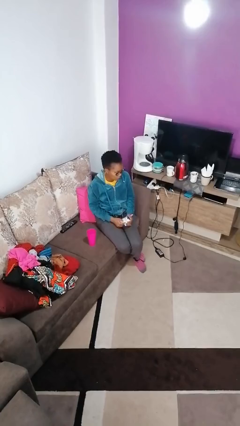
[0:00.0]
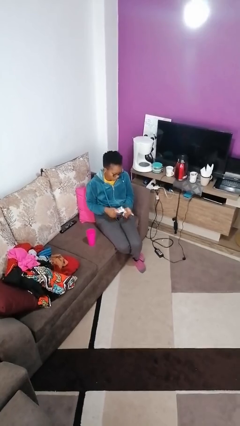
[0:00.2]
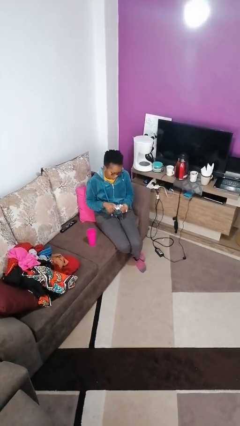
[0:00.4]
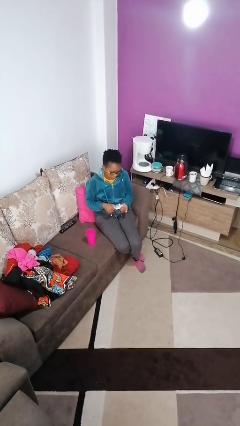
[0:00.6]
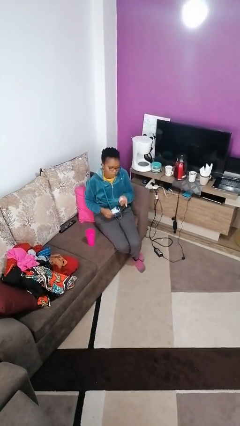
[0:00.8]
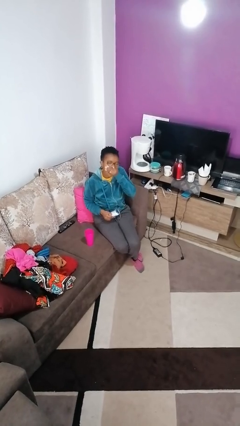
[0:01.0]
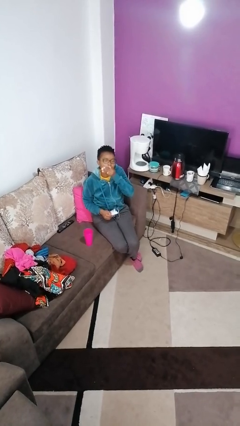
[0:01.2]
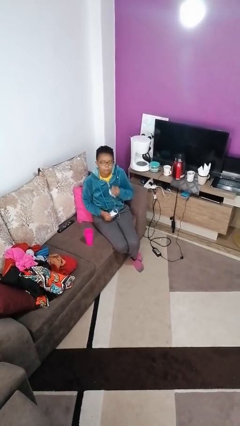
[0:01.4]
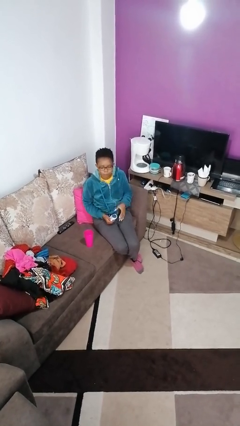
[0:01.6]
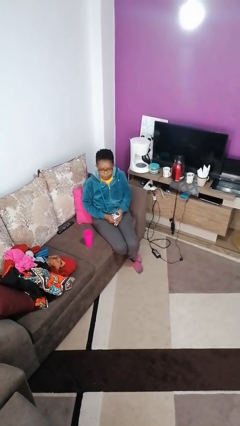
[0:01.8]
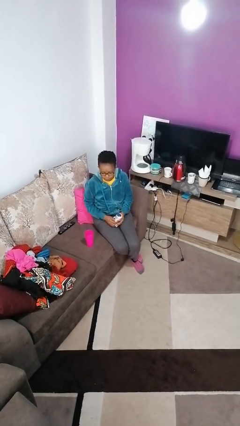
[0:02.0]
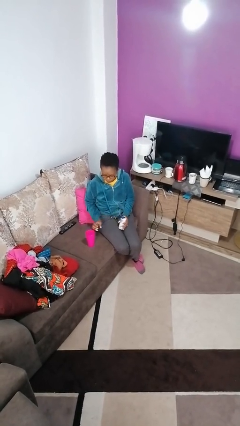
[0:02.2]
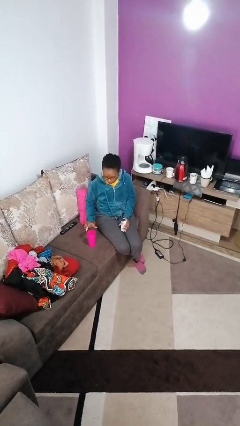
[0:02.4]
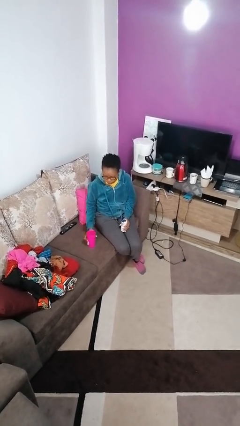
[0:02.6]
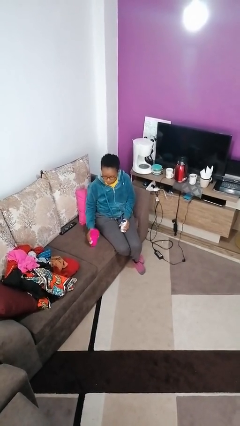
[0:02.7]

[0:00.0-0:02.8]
person takes medicine pills

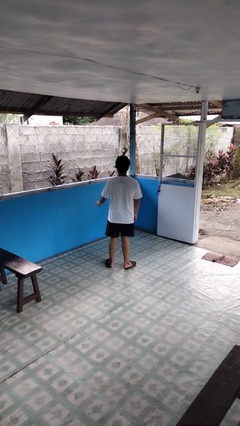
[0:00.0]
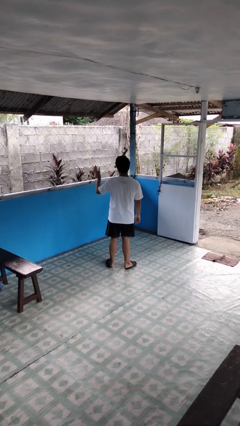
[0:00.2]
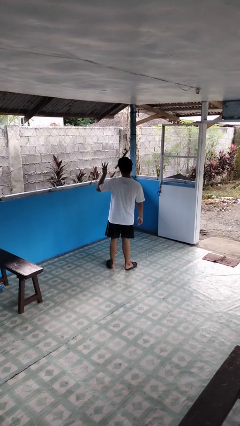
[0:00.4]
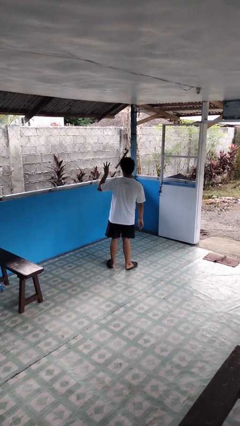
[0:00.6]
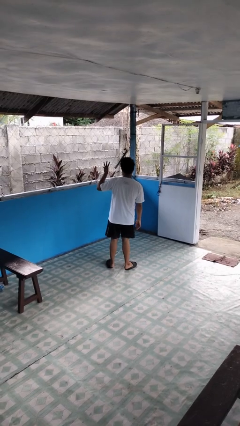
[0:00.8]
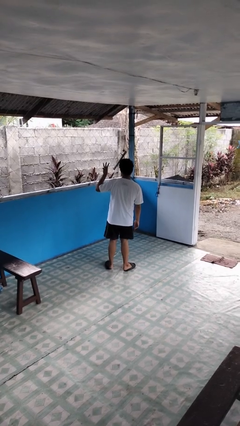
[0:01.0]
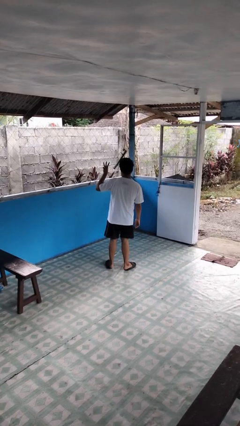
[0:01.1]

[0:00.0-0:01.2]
person gestures number three

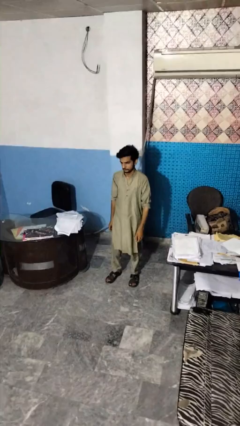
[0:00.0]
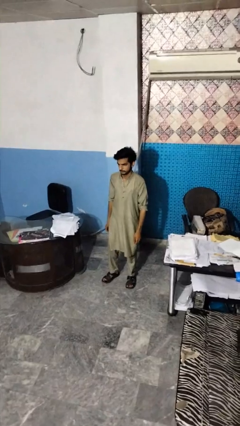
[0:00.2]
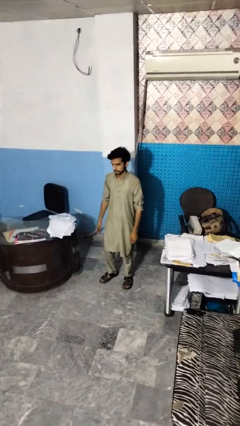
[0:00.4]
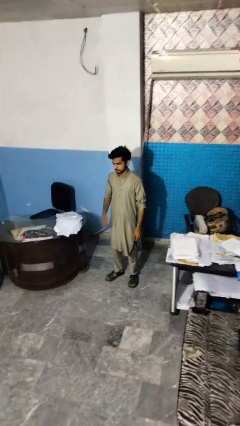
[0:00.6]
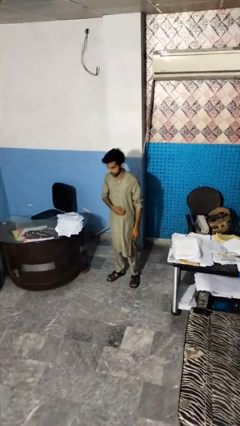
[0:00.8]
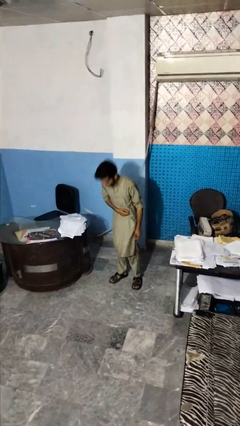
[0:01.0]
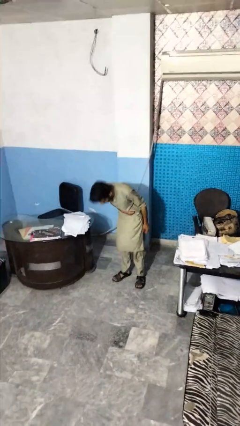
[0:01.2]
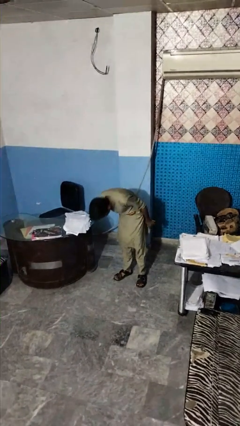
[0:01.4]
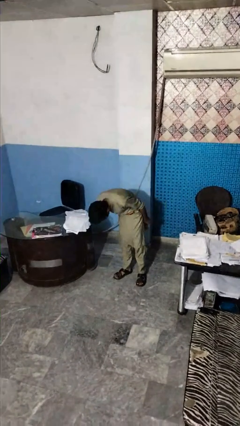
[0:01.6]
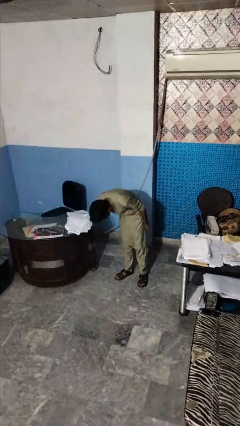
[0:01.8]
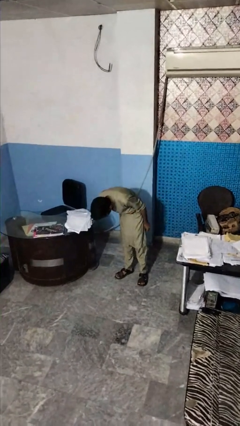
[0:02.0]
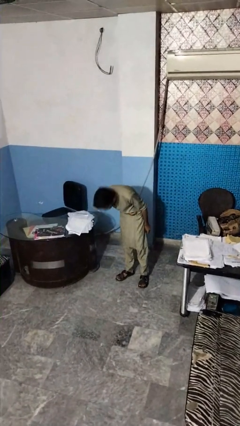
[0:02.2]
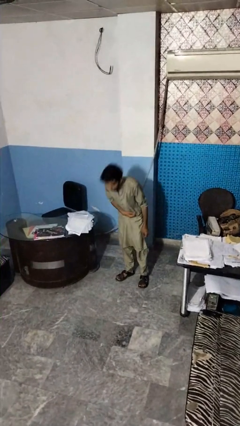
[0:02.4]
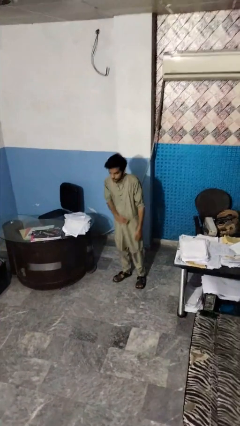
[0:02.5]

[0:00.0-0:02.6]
person bows

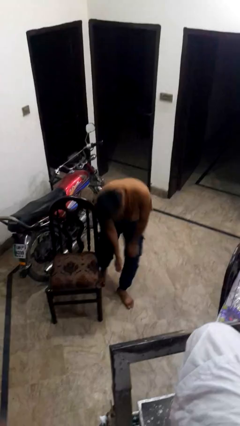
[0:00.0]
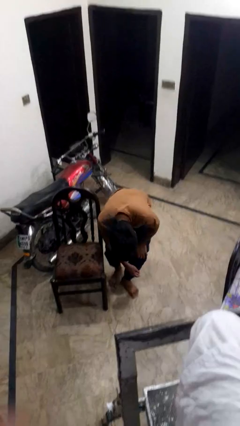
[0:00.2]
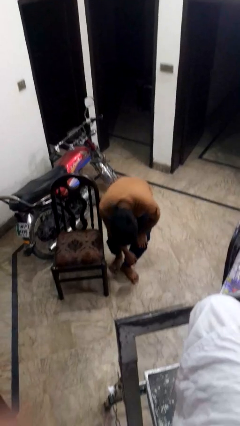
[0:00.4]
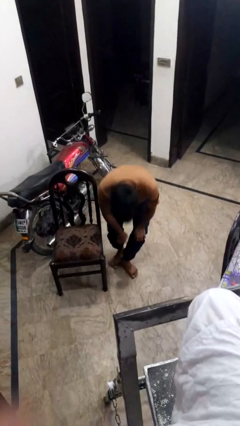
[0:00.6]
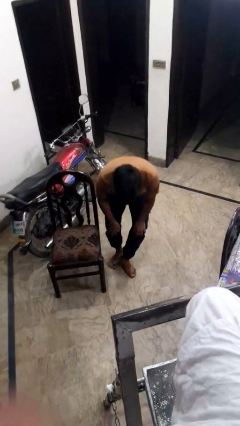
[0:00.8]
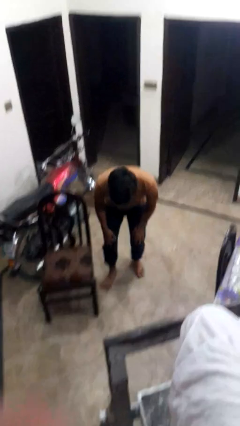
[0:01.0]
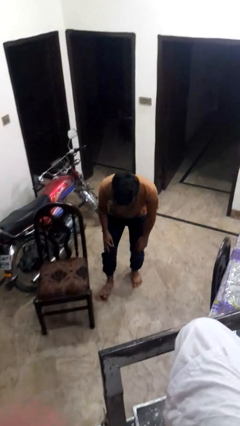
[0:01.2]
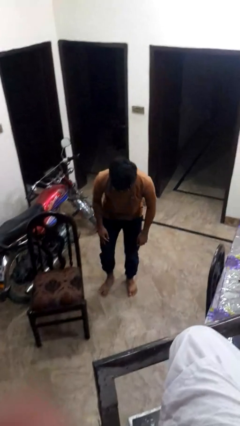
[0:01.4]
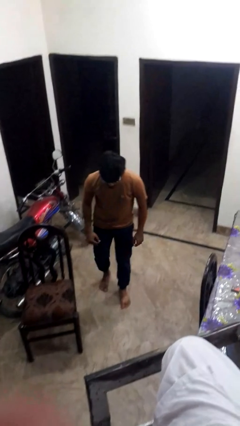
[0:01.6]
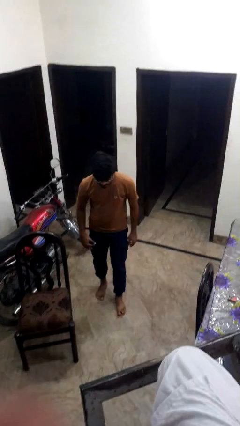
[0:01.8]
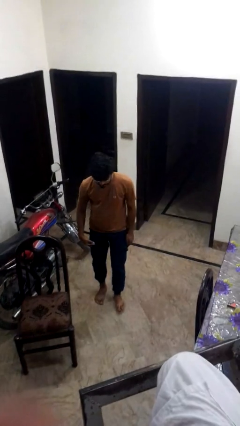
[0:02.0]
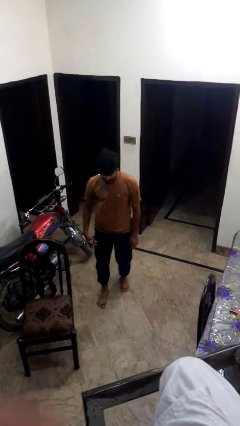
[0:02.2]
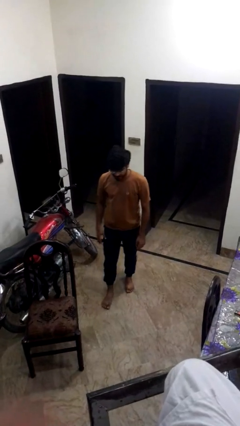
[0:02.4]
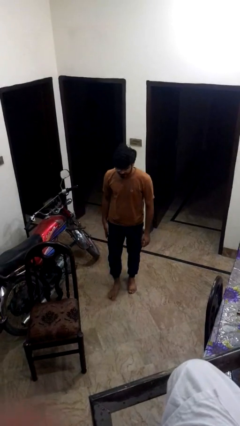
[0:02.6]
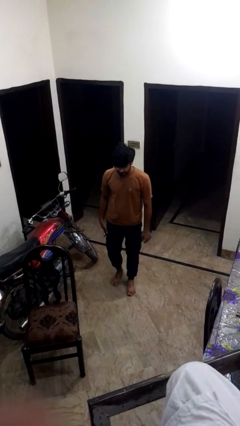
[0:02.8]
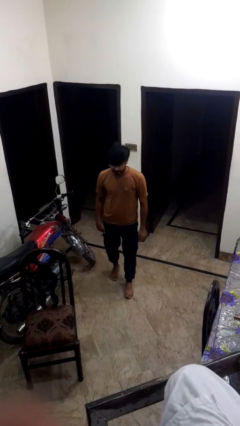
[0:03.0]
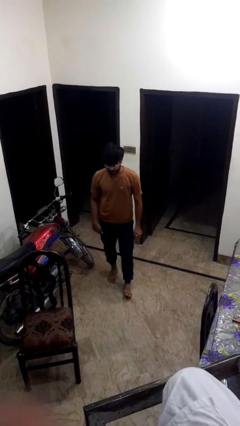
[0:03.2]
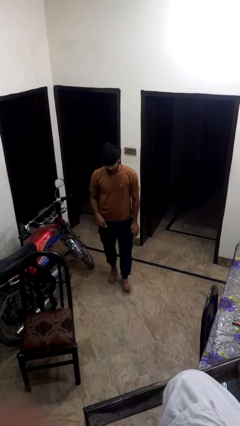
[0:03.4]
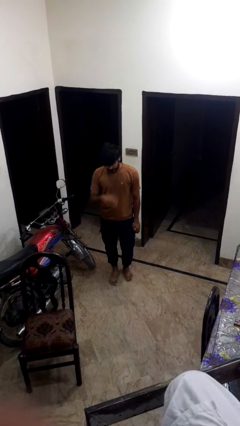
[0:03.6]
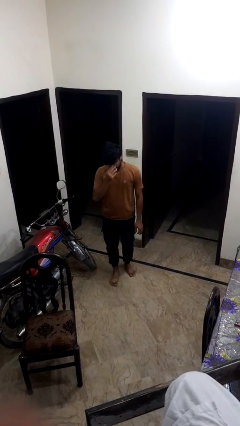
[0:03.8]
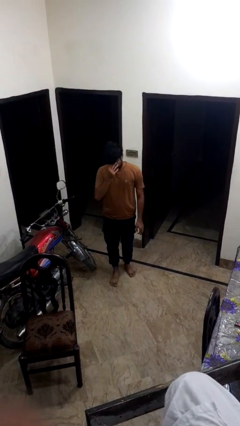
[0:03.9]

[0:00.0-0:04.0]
person stubs toe

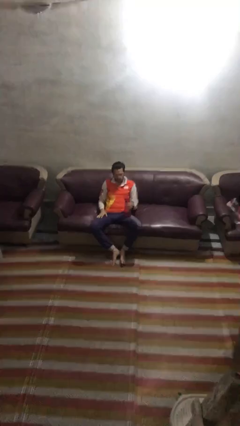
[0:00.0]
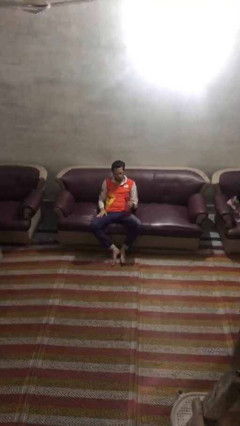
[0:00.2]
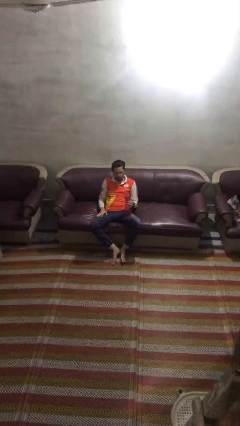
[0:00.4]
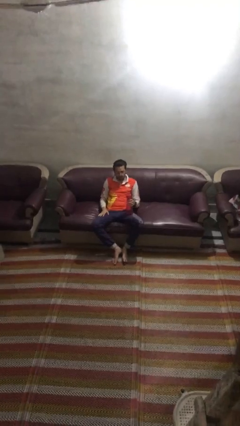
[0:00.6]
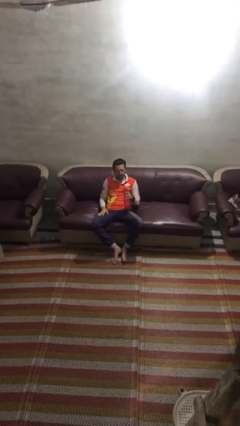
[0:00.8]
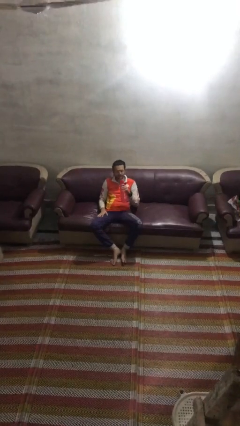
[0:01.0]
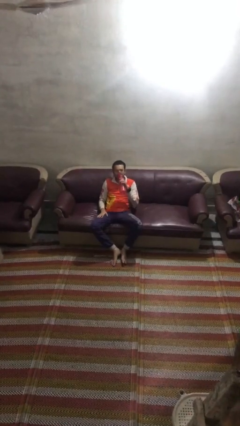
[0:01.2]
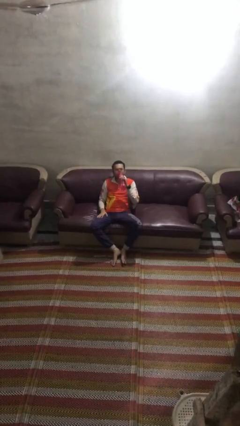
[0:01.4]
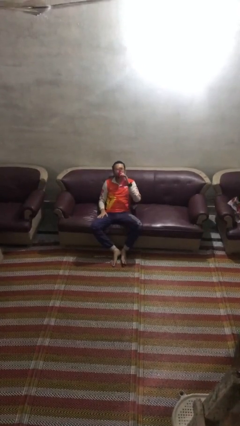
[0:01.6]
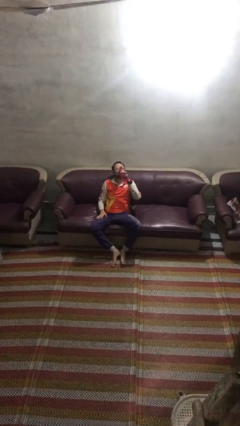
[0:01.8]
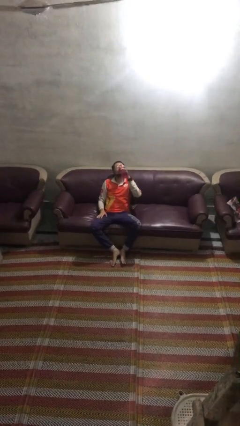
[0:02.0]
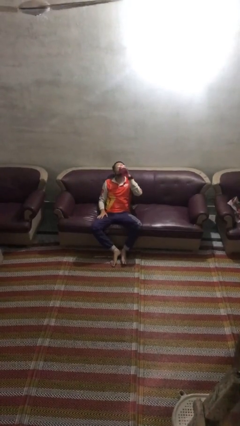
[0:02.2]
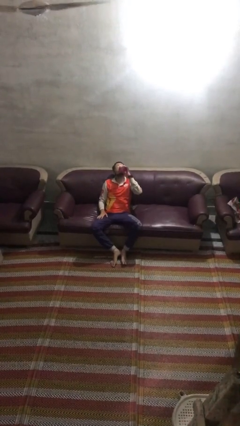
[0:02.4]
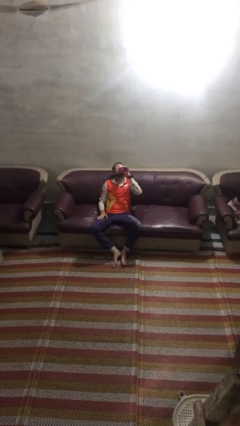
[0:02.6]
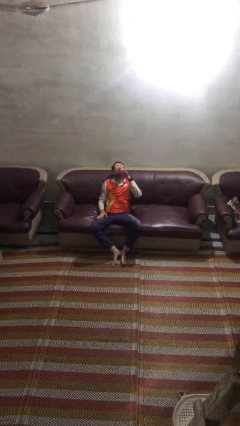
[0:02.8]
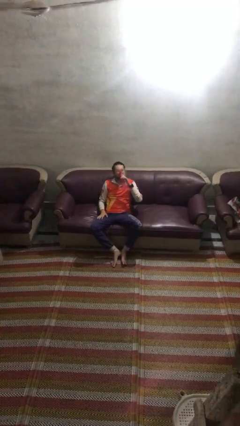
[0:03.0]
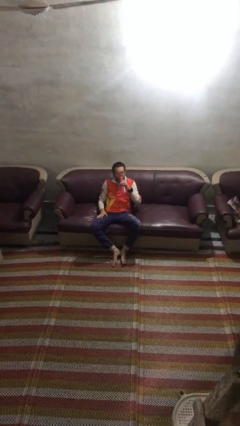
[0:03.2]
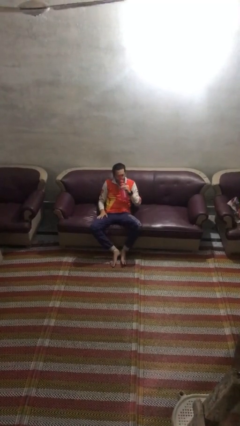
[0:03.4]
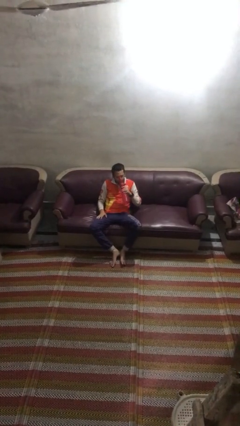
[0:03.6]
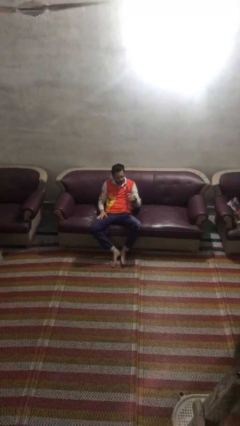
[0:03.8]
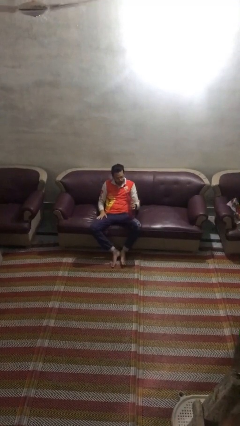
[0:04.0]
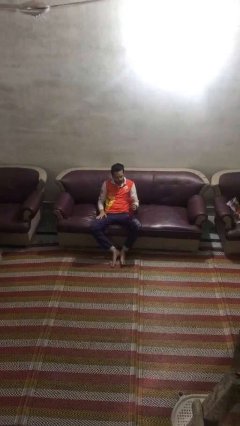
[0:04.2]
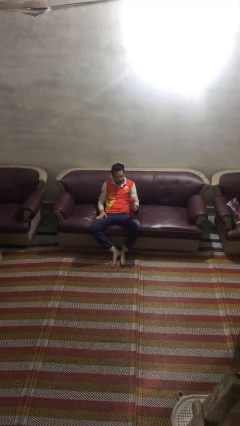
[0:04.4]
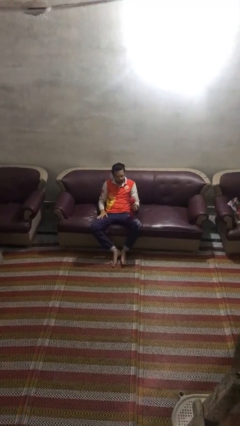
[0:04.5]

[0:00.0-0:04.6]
person drinks from bottle

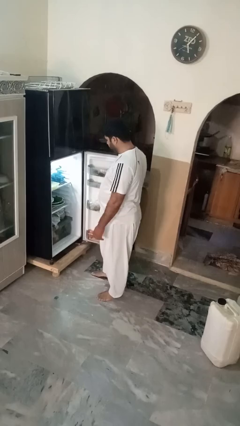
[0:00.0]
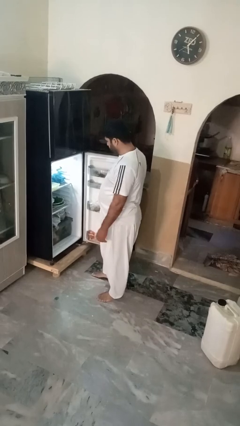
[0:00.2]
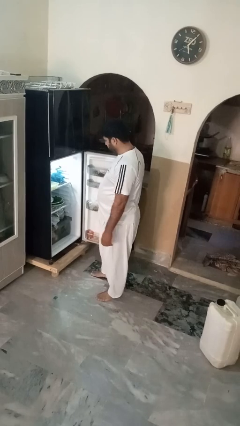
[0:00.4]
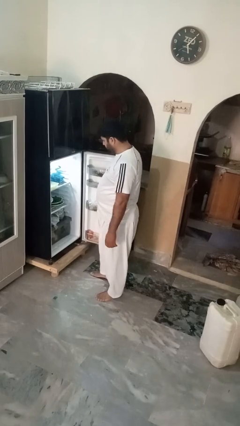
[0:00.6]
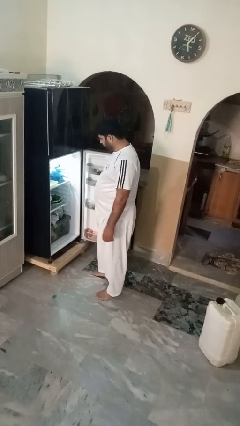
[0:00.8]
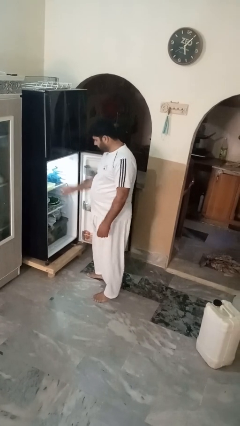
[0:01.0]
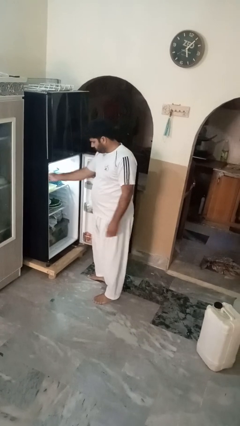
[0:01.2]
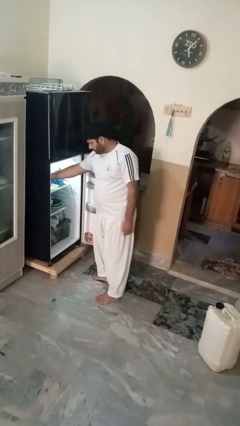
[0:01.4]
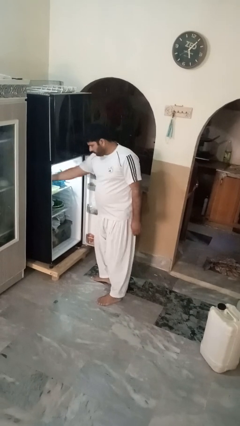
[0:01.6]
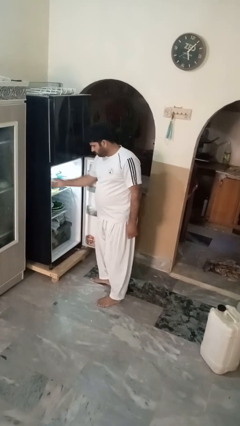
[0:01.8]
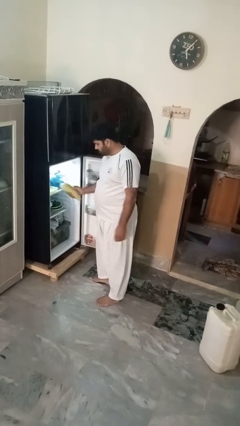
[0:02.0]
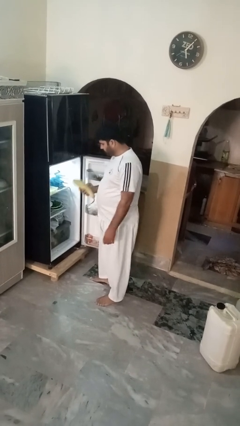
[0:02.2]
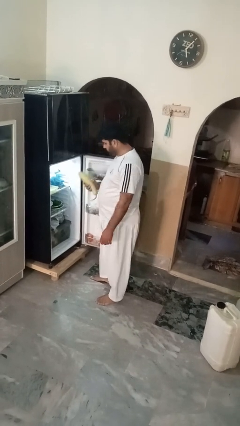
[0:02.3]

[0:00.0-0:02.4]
person takes object from refrigerator
